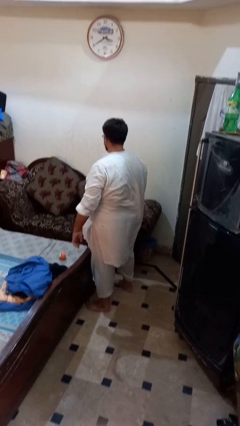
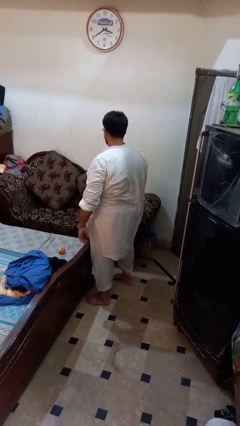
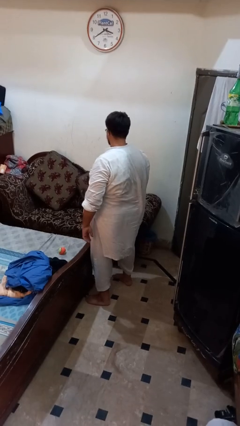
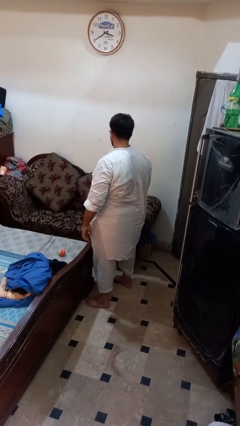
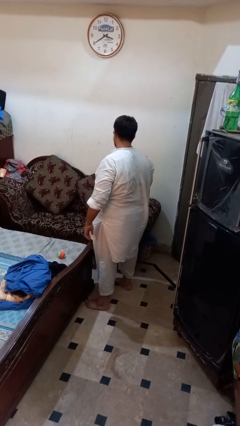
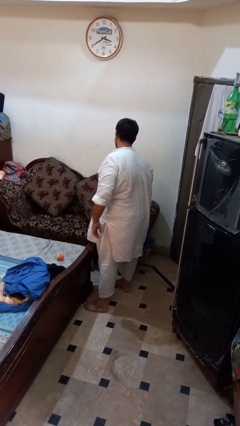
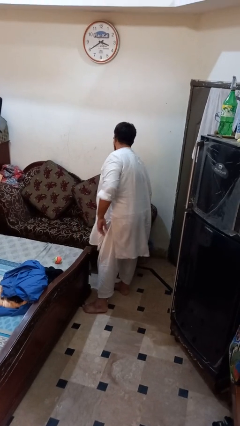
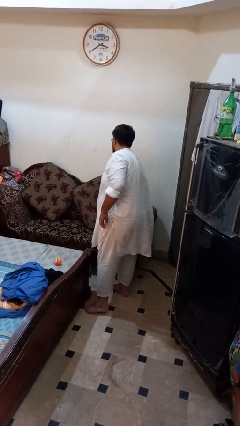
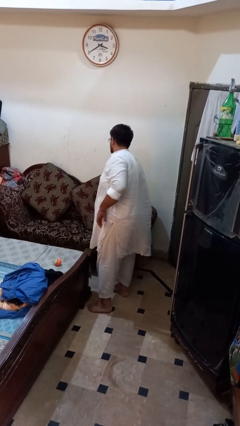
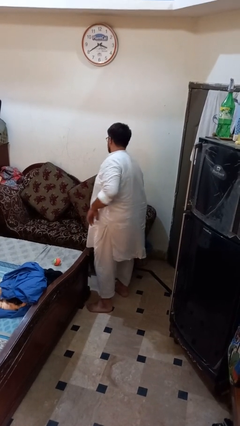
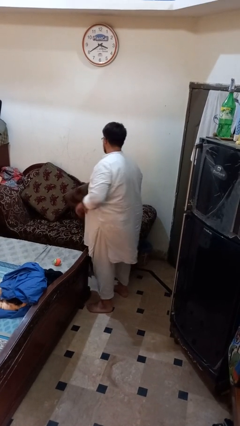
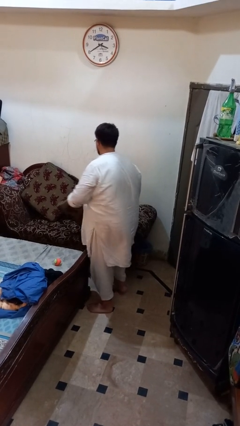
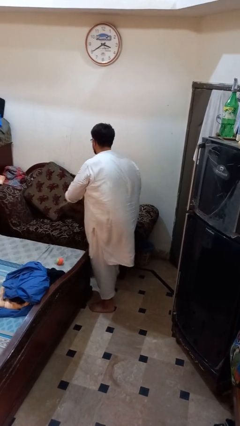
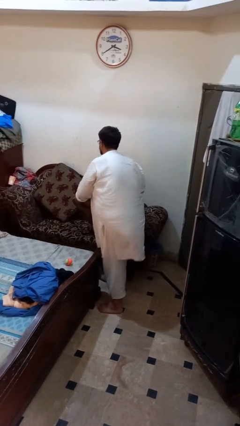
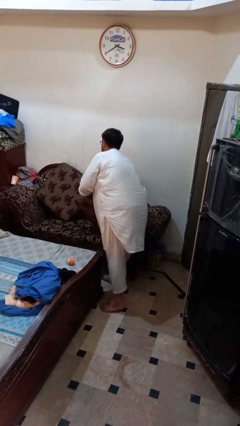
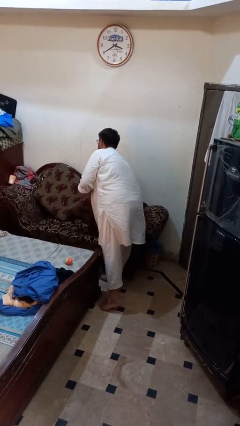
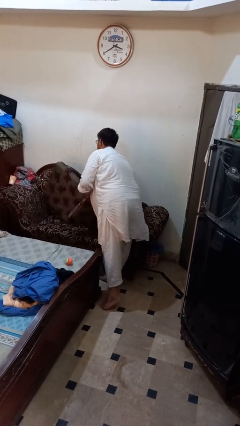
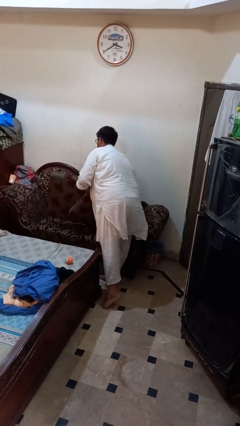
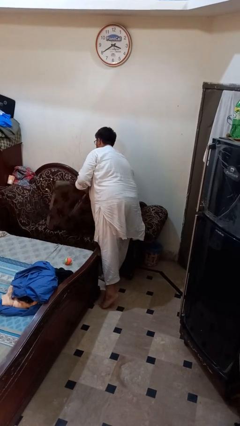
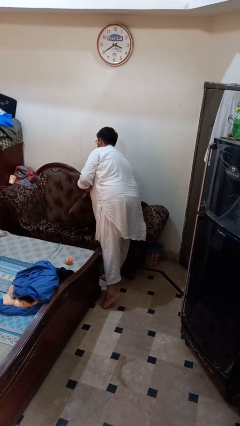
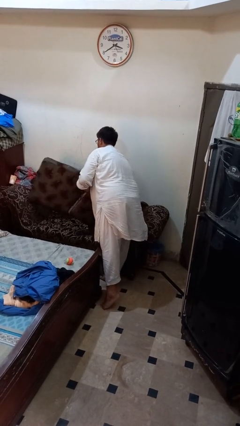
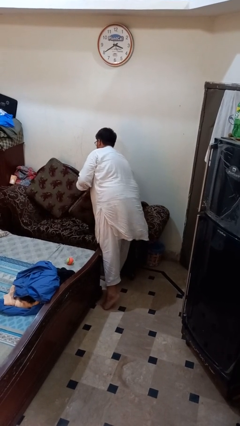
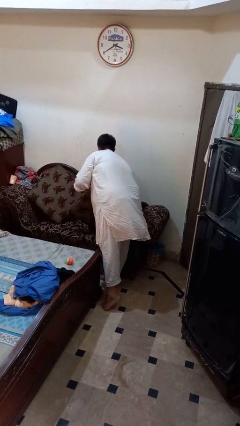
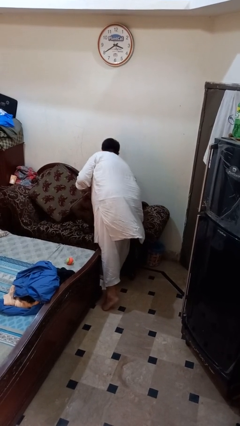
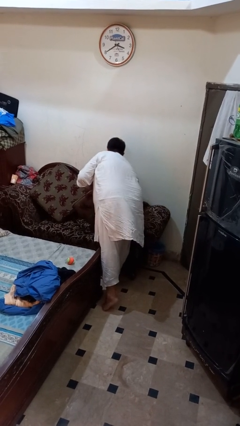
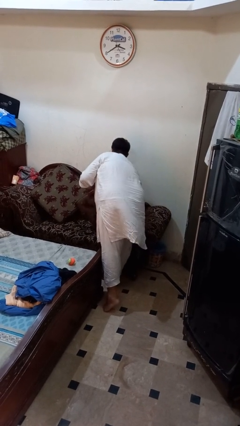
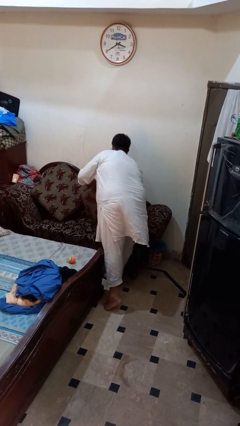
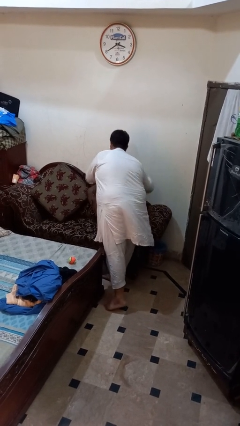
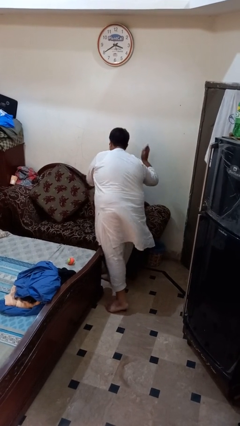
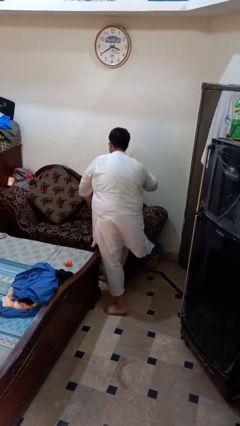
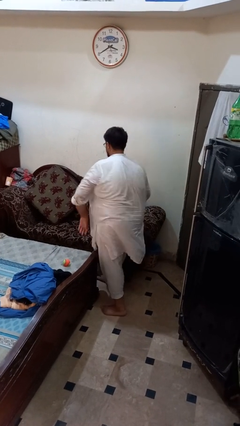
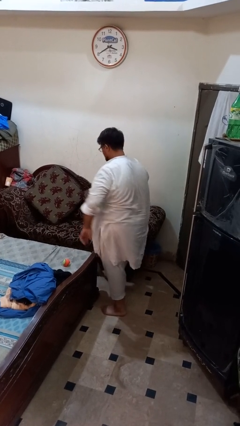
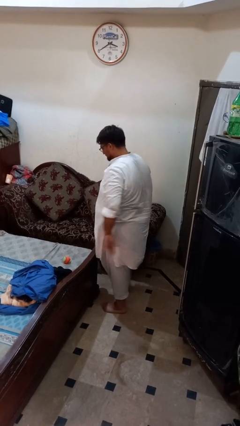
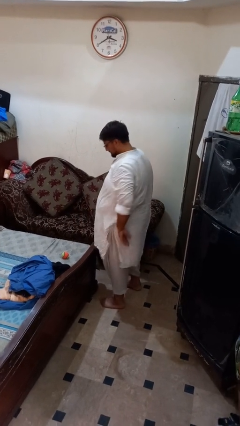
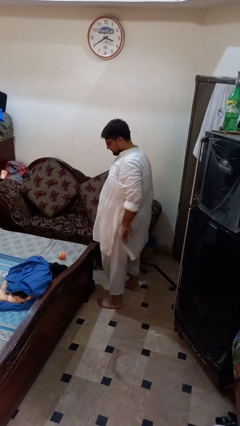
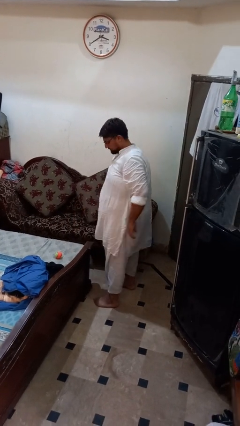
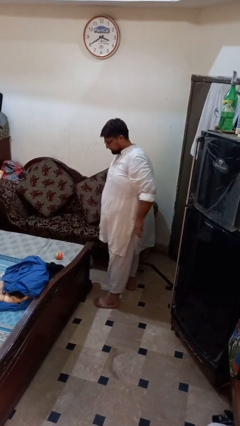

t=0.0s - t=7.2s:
person searches in couch

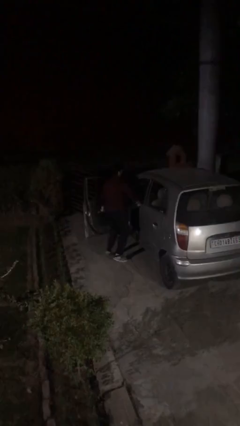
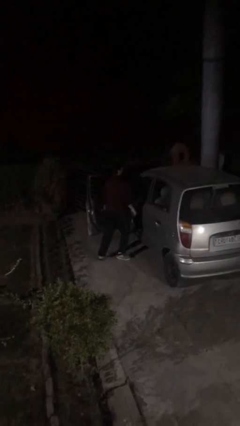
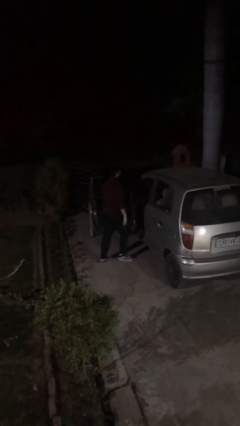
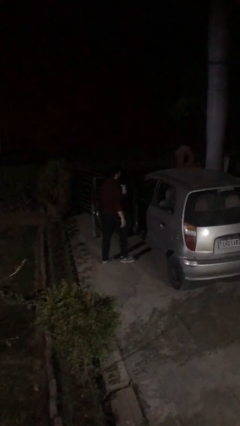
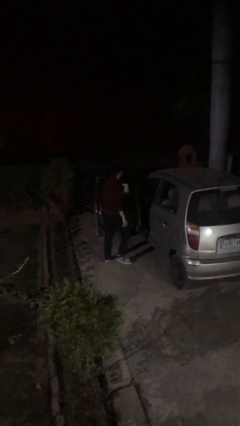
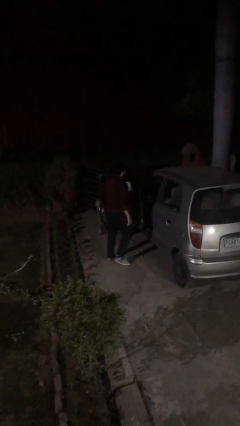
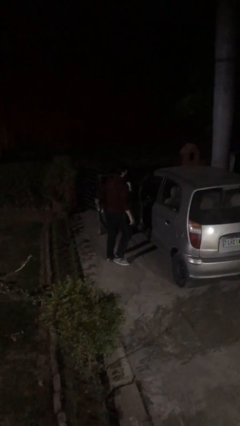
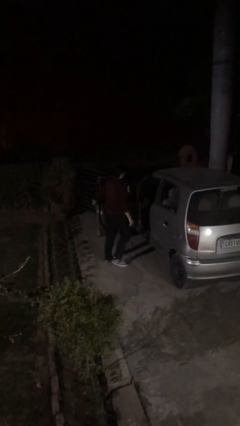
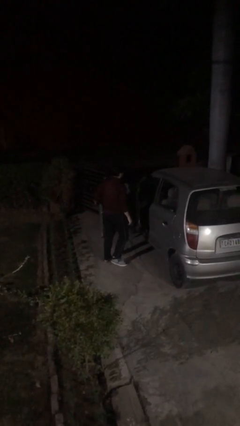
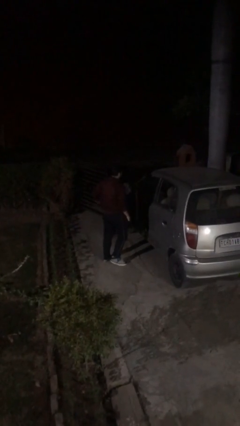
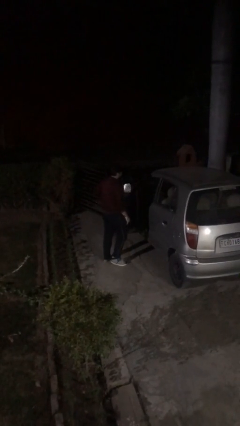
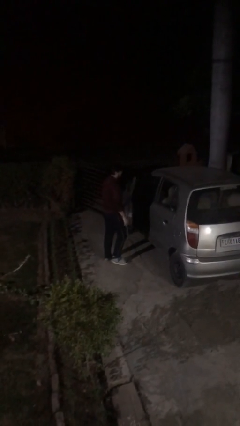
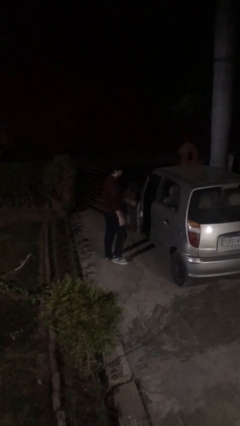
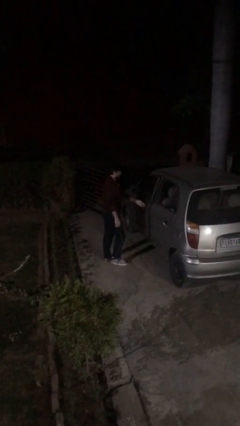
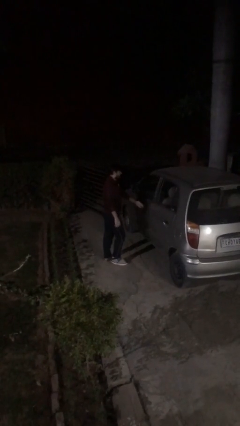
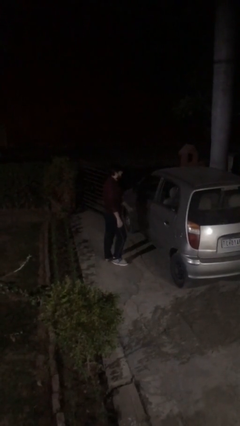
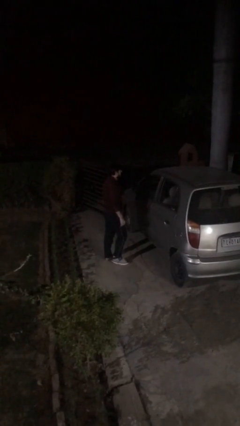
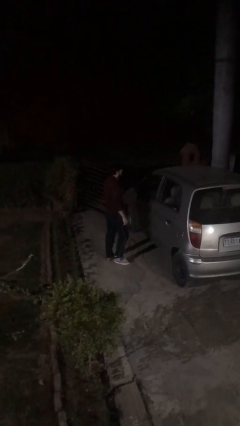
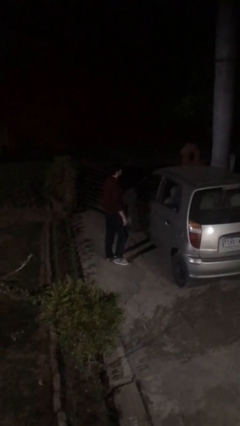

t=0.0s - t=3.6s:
person closes car door

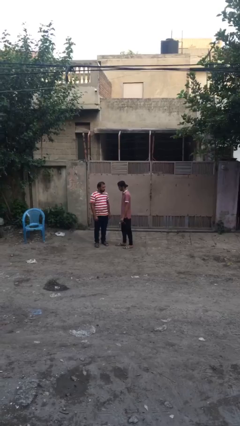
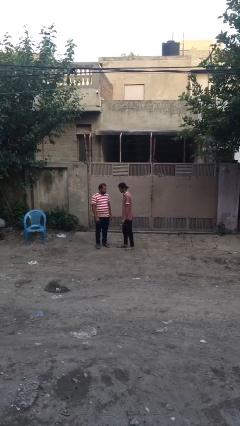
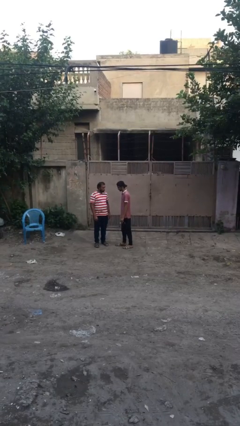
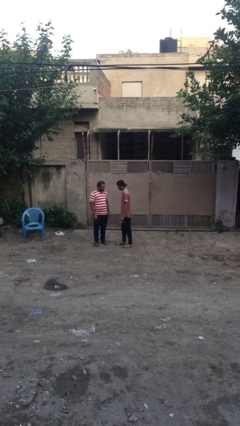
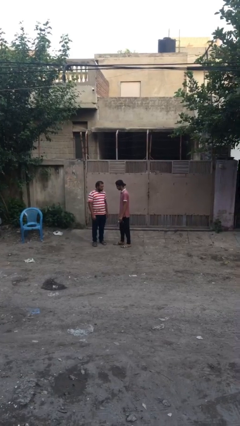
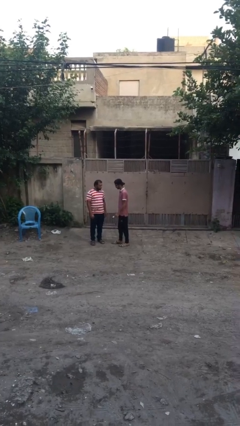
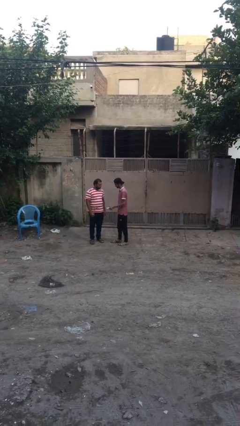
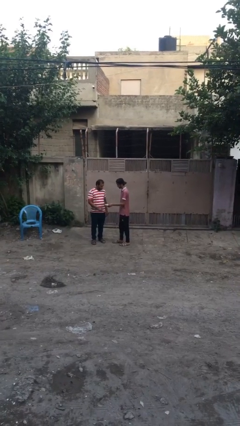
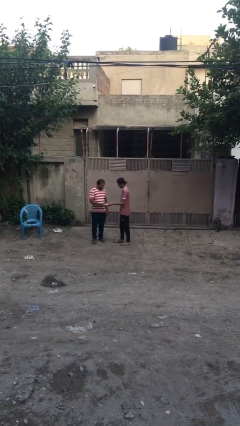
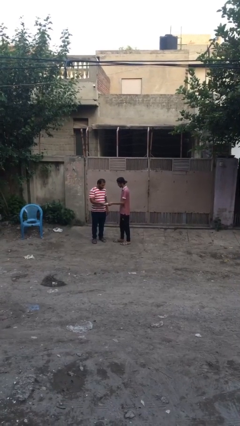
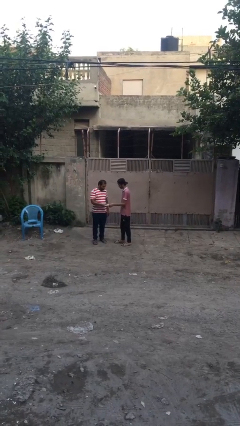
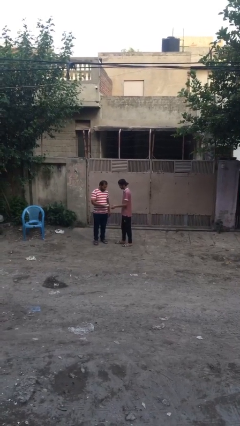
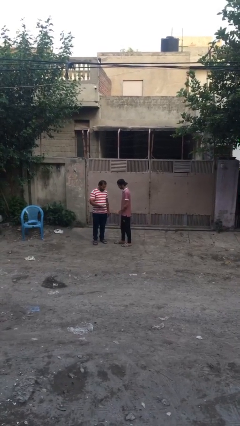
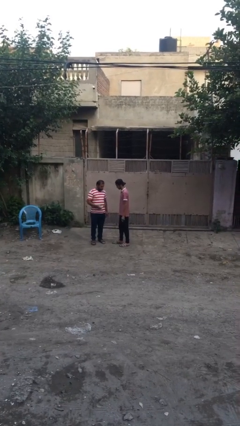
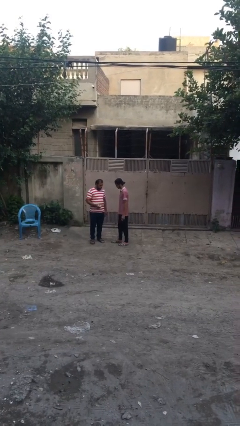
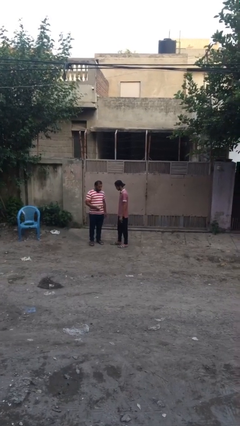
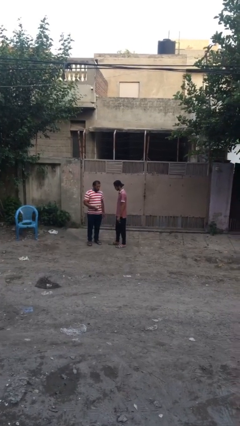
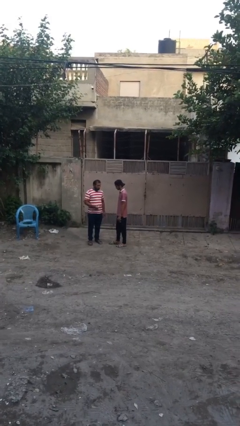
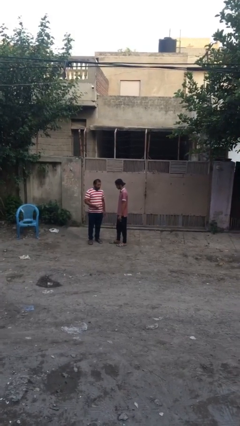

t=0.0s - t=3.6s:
person transfers object to person

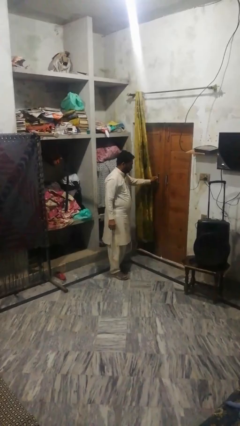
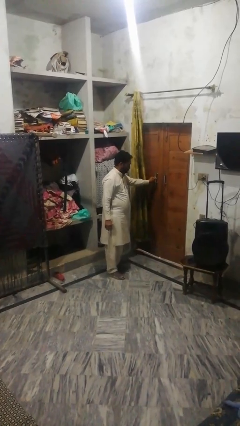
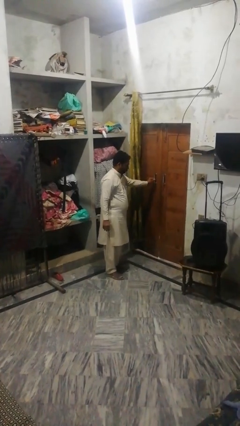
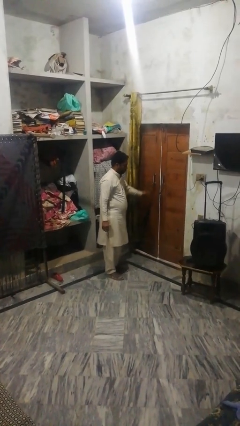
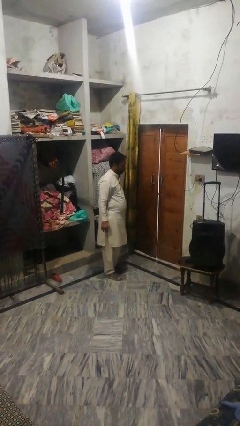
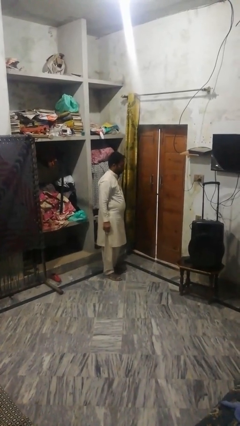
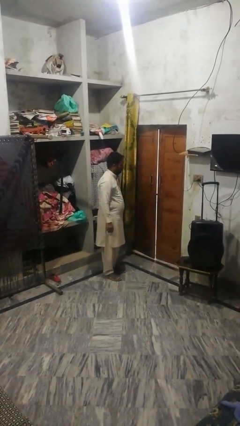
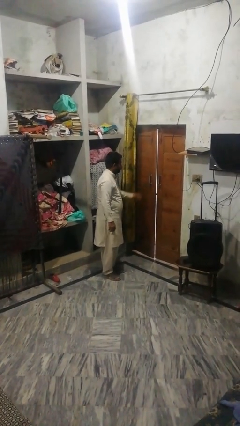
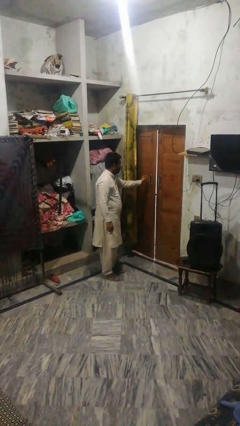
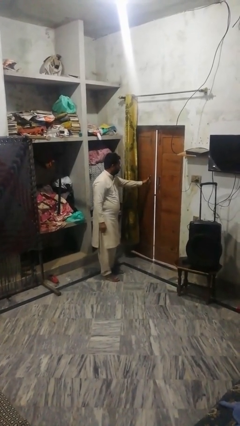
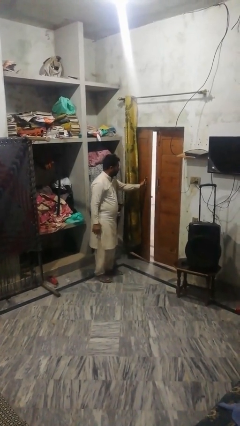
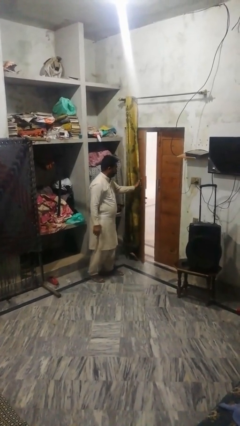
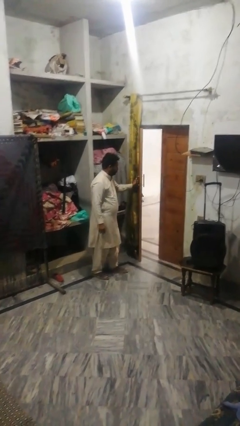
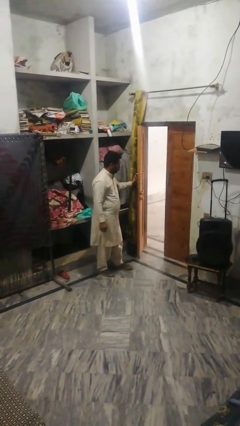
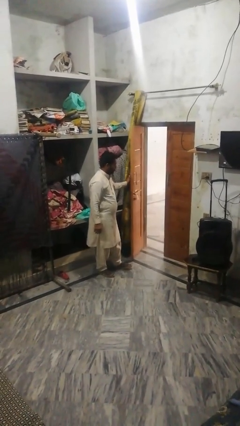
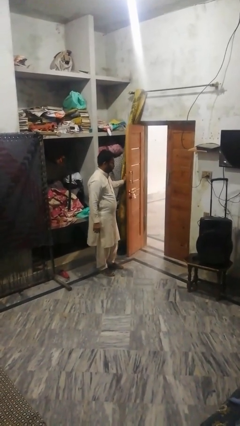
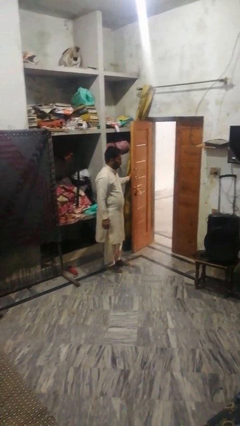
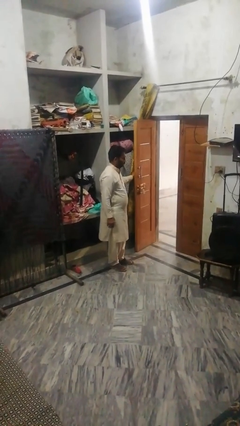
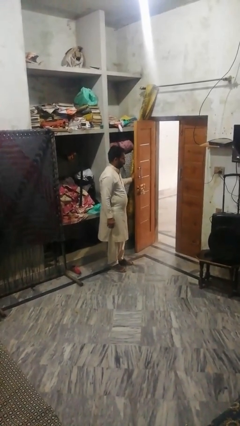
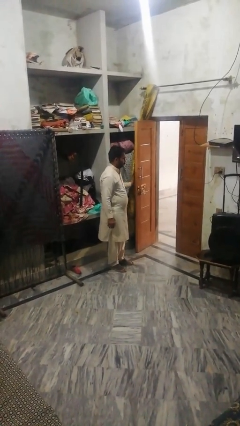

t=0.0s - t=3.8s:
person opens facility door
